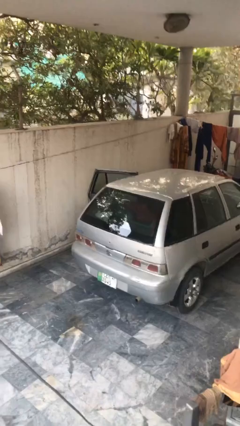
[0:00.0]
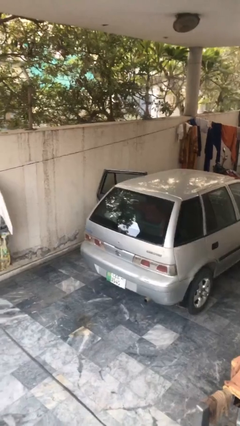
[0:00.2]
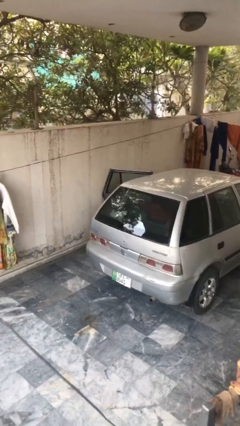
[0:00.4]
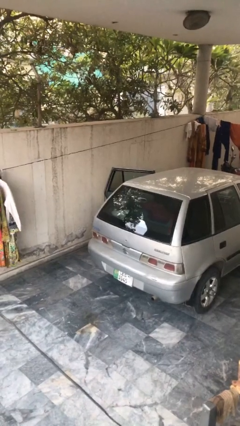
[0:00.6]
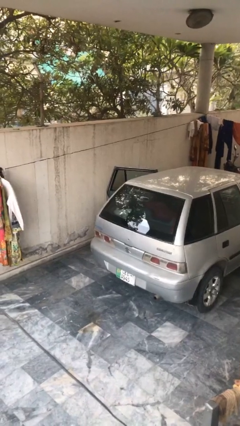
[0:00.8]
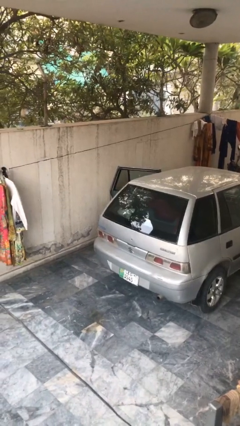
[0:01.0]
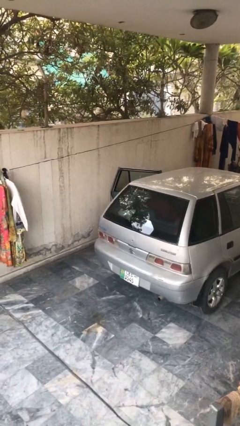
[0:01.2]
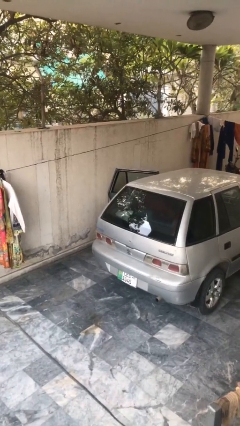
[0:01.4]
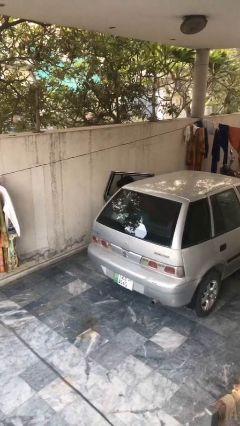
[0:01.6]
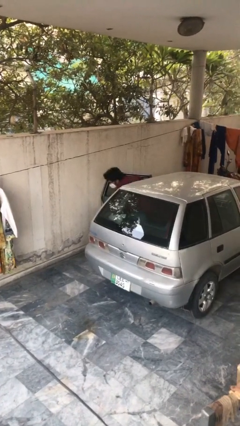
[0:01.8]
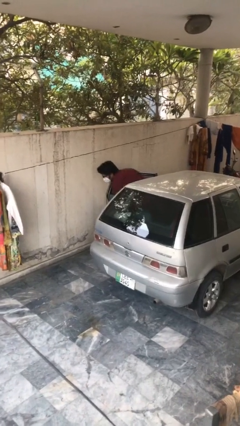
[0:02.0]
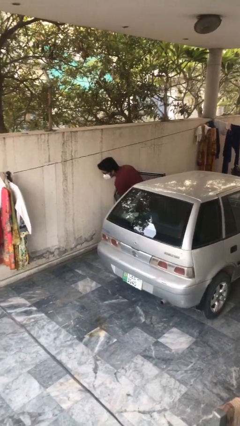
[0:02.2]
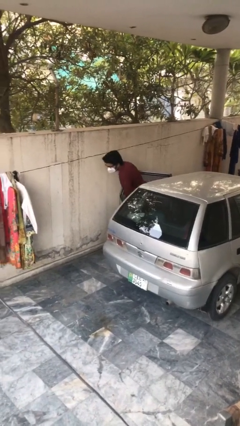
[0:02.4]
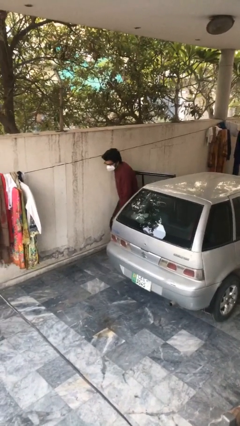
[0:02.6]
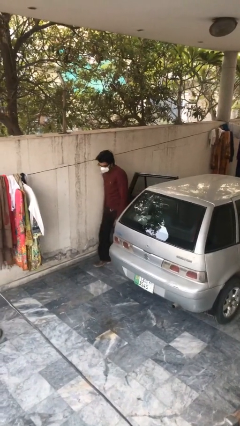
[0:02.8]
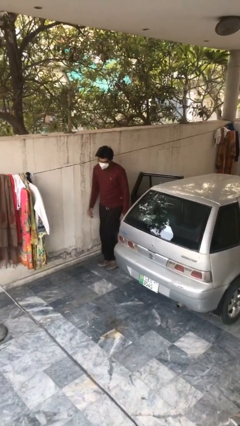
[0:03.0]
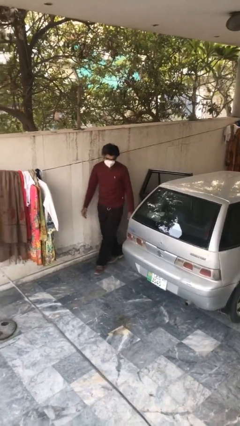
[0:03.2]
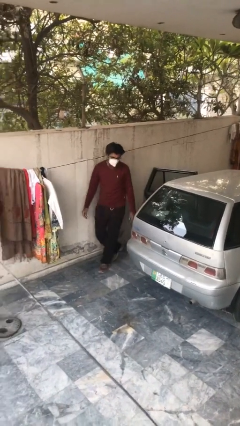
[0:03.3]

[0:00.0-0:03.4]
person exits car

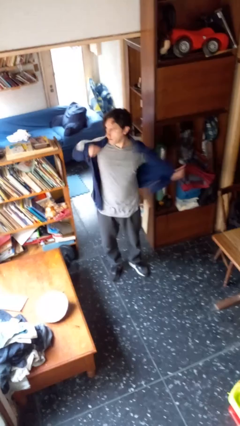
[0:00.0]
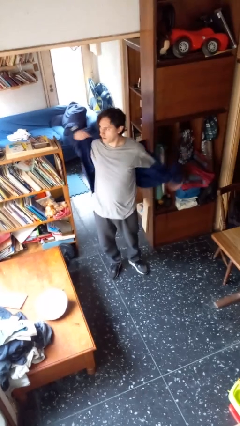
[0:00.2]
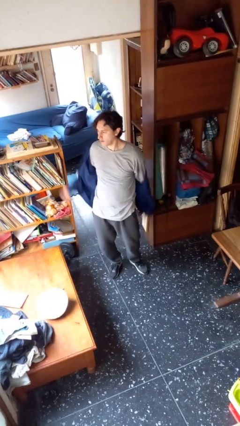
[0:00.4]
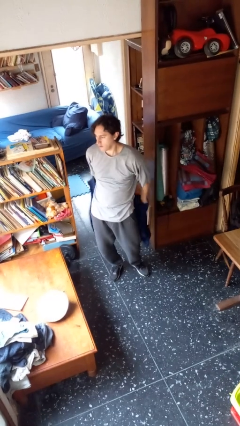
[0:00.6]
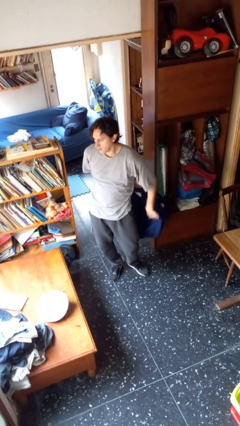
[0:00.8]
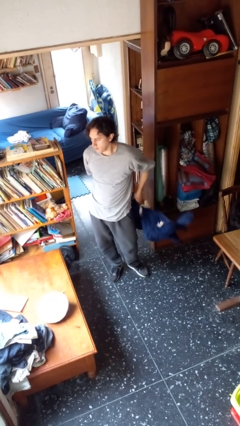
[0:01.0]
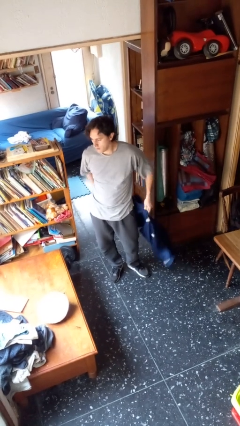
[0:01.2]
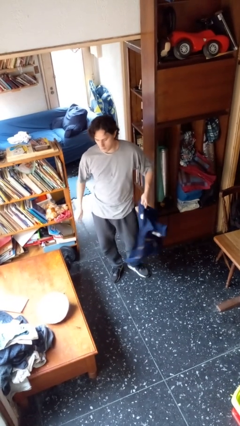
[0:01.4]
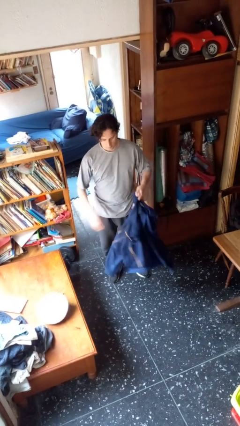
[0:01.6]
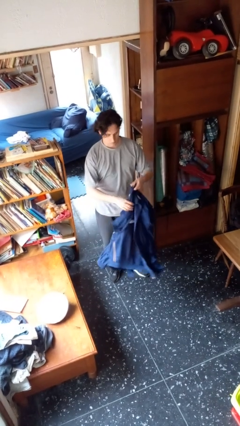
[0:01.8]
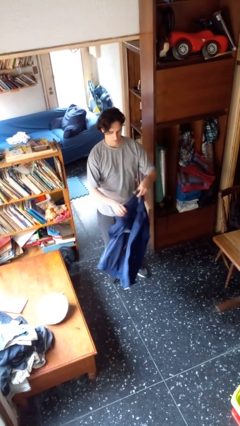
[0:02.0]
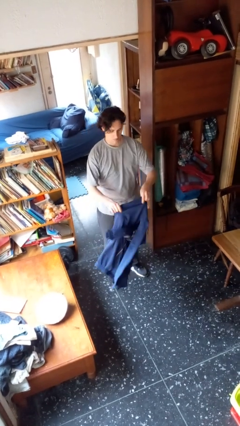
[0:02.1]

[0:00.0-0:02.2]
person takes off jacket

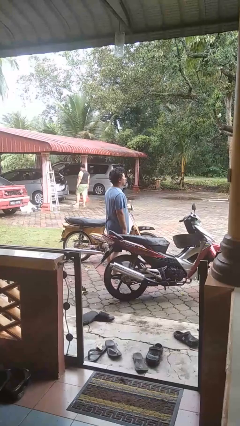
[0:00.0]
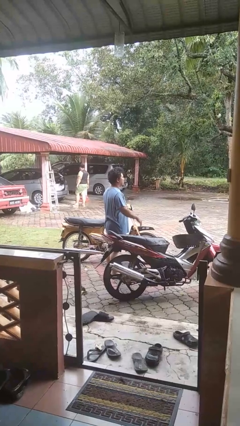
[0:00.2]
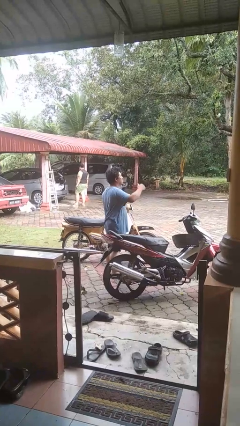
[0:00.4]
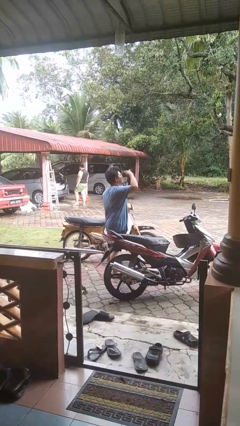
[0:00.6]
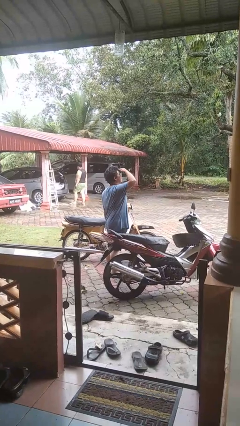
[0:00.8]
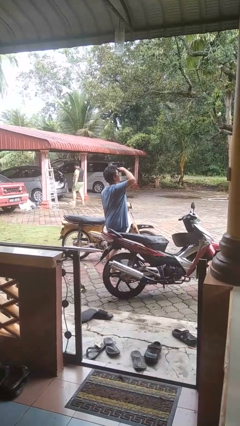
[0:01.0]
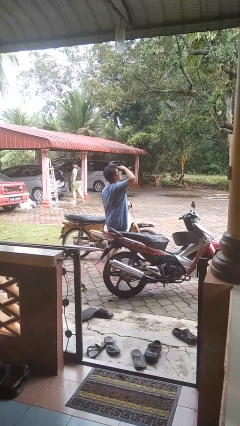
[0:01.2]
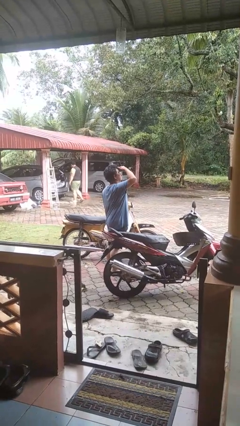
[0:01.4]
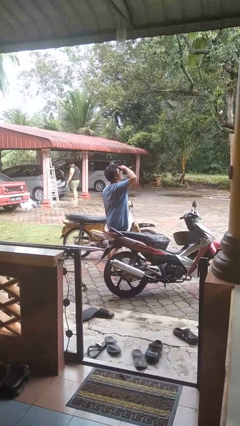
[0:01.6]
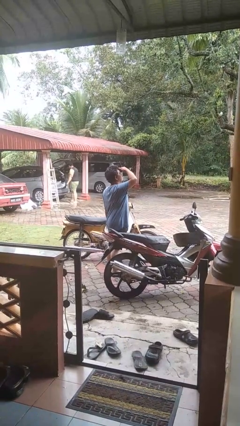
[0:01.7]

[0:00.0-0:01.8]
person shades eyes

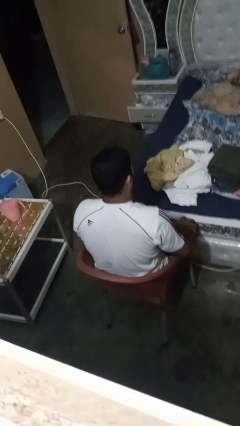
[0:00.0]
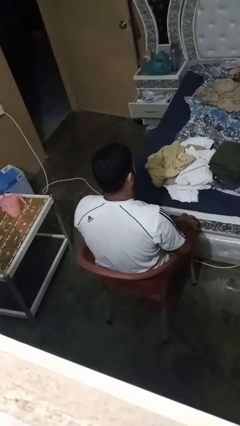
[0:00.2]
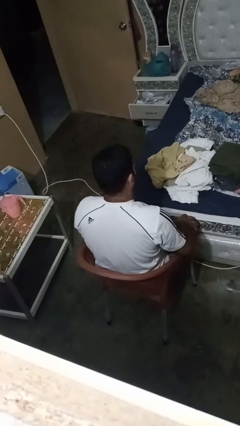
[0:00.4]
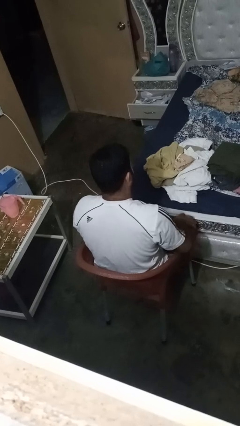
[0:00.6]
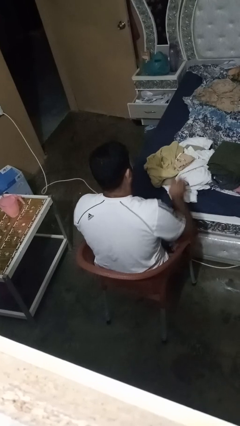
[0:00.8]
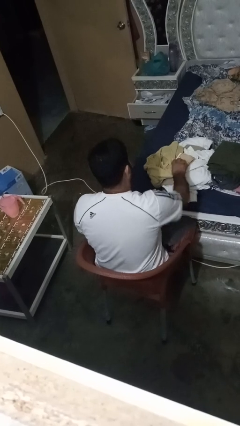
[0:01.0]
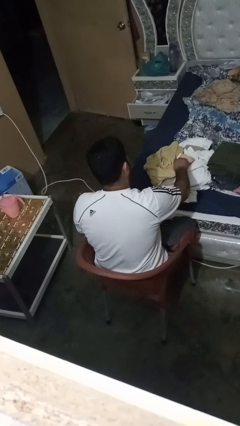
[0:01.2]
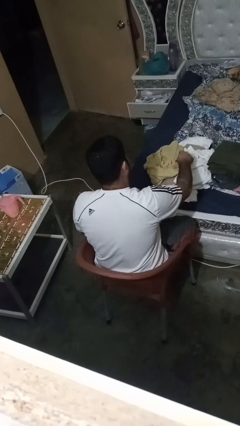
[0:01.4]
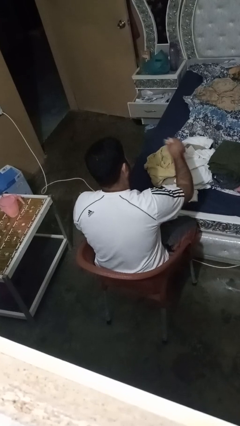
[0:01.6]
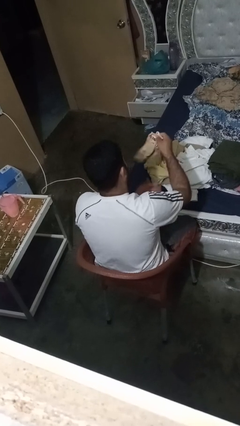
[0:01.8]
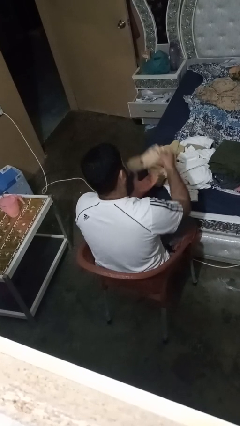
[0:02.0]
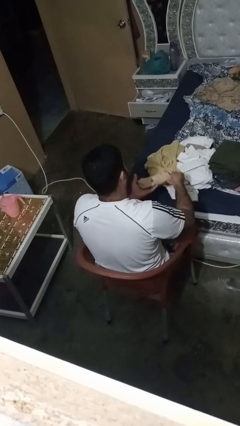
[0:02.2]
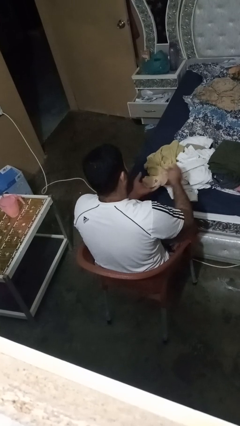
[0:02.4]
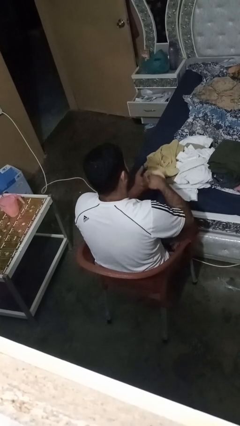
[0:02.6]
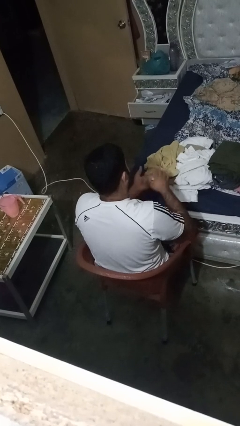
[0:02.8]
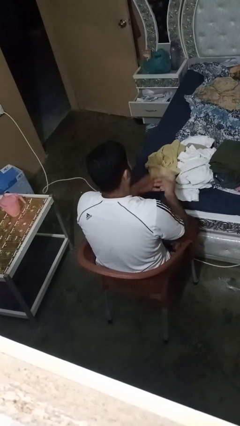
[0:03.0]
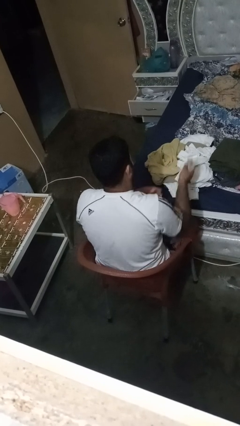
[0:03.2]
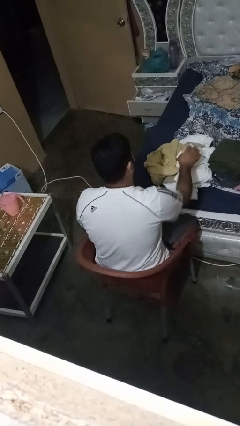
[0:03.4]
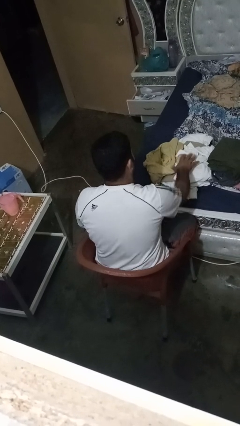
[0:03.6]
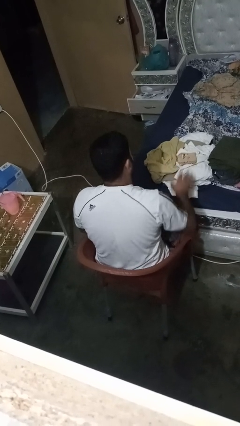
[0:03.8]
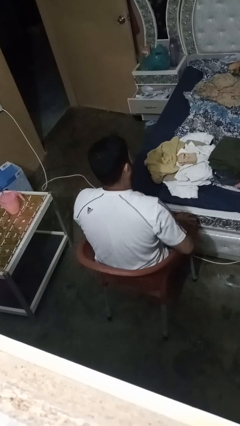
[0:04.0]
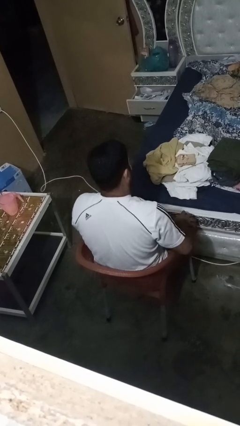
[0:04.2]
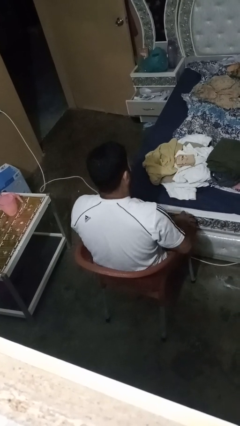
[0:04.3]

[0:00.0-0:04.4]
person folds socks

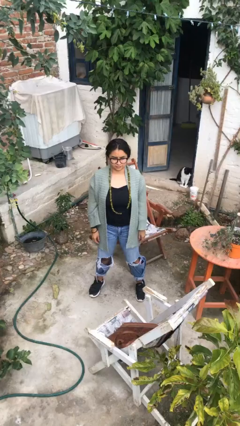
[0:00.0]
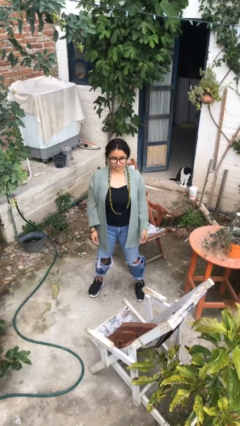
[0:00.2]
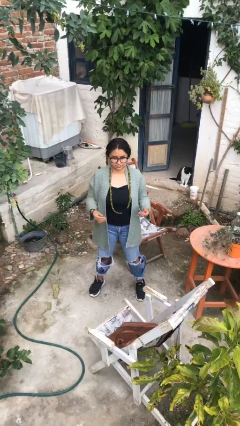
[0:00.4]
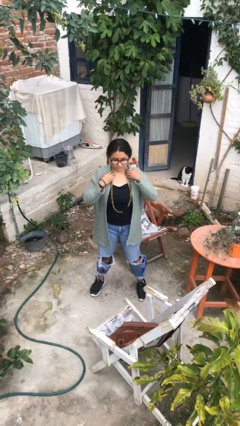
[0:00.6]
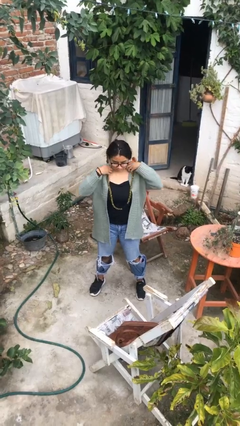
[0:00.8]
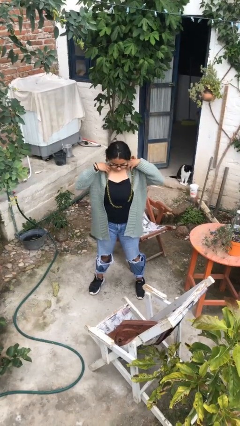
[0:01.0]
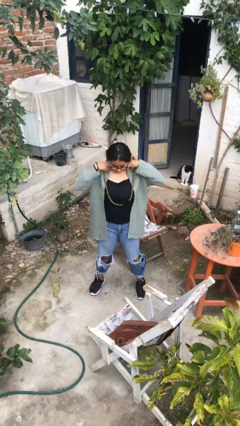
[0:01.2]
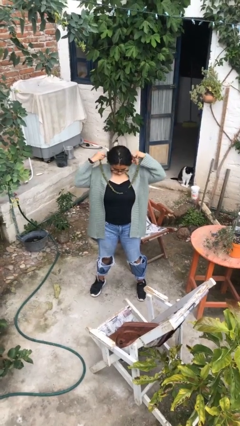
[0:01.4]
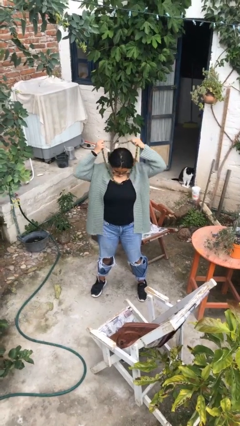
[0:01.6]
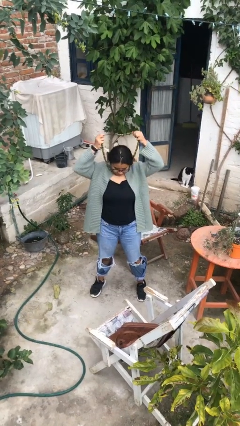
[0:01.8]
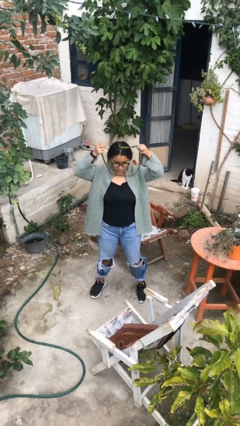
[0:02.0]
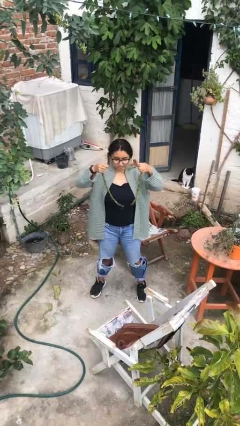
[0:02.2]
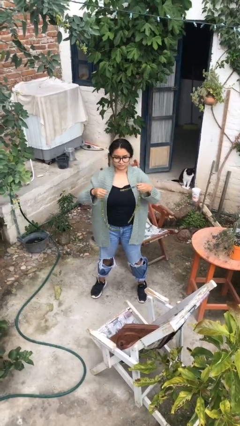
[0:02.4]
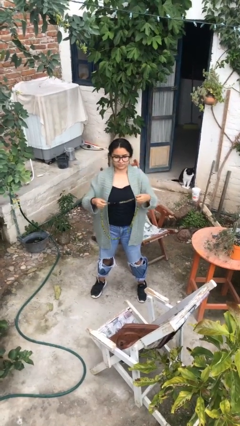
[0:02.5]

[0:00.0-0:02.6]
person takes off necklace

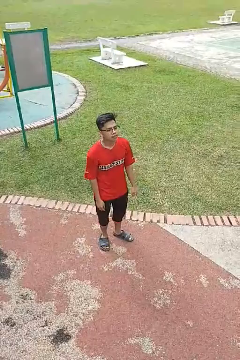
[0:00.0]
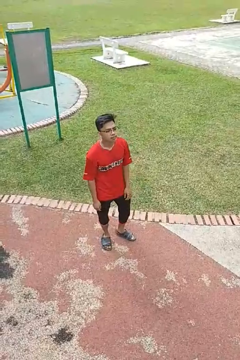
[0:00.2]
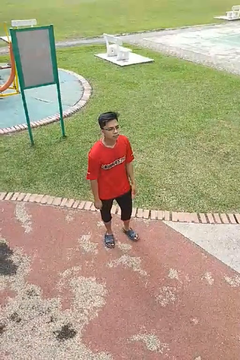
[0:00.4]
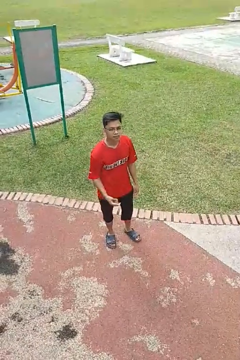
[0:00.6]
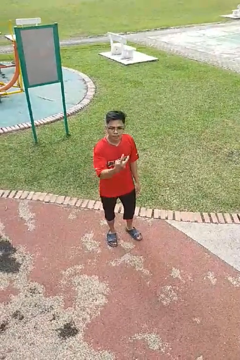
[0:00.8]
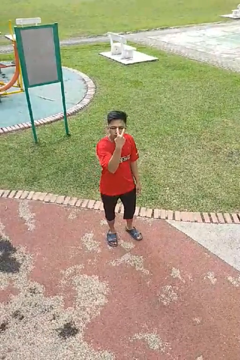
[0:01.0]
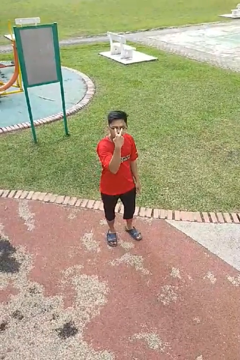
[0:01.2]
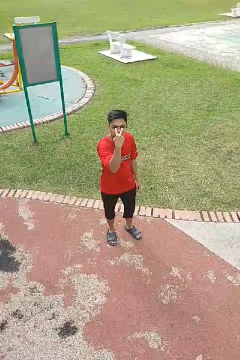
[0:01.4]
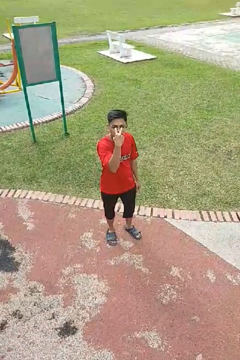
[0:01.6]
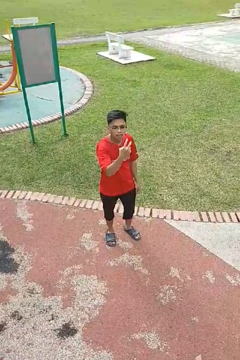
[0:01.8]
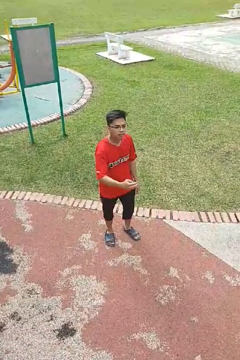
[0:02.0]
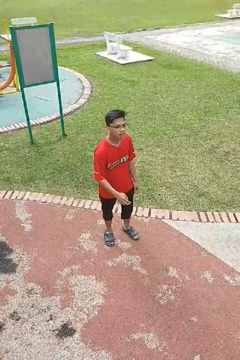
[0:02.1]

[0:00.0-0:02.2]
person gestures watch closely

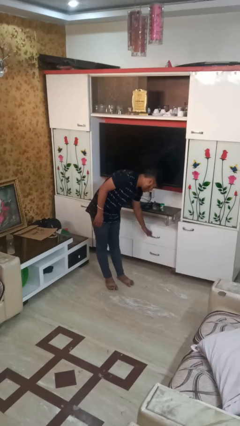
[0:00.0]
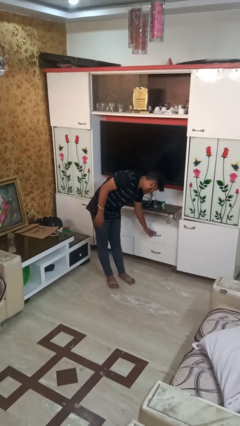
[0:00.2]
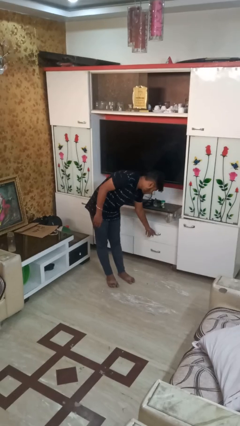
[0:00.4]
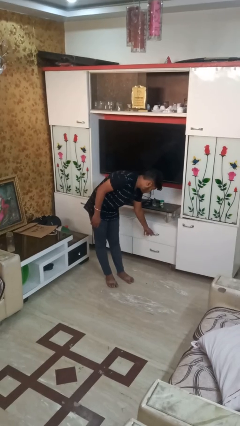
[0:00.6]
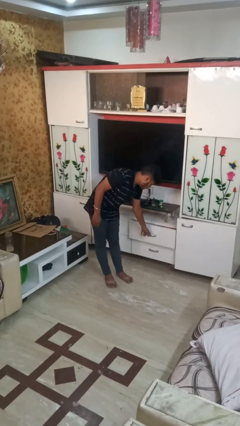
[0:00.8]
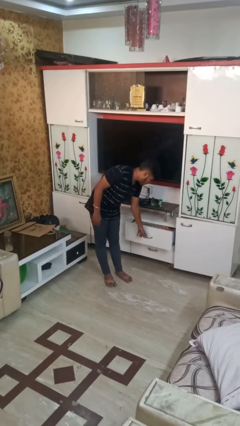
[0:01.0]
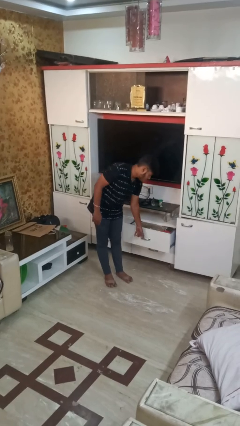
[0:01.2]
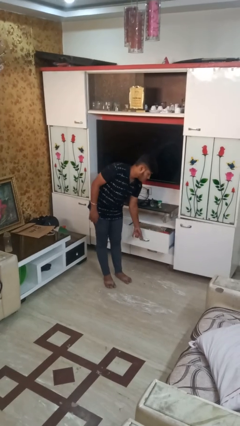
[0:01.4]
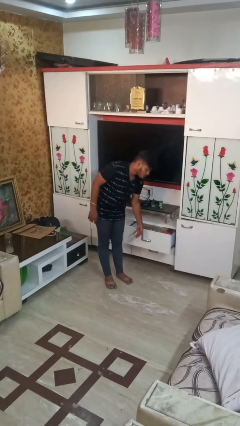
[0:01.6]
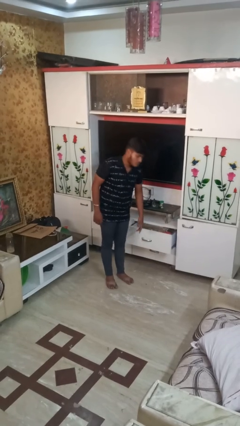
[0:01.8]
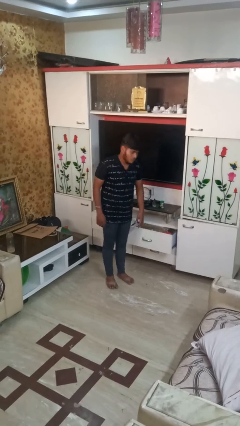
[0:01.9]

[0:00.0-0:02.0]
person opens dresser drawer
